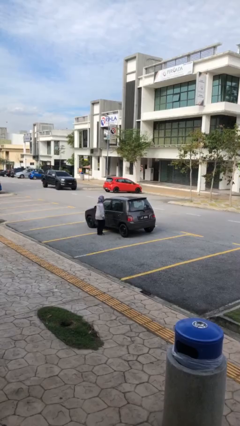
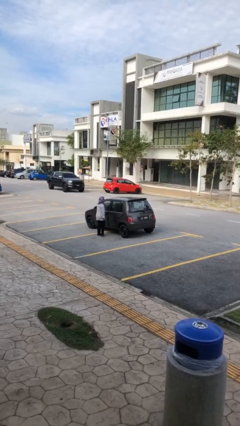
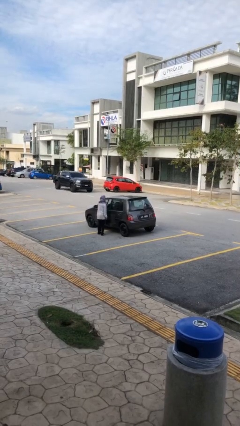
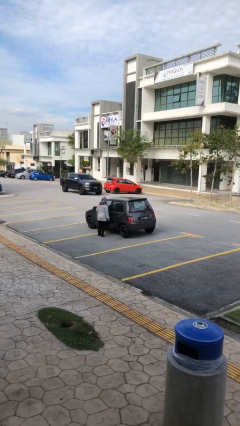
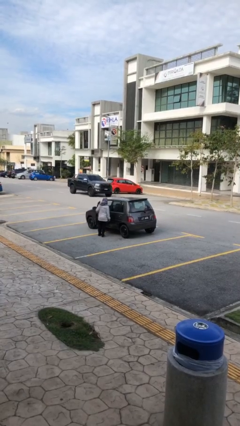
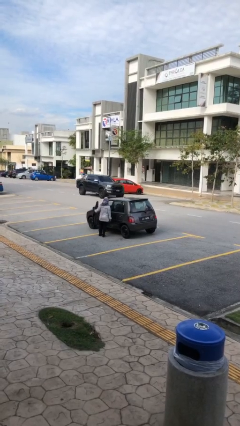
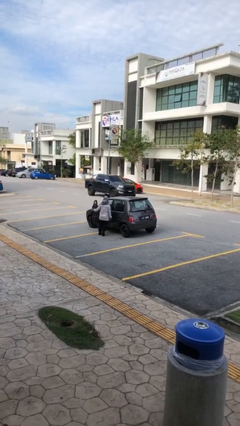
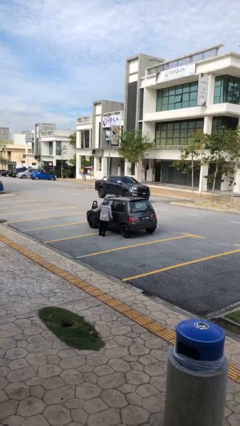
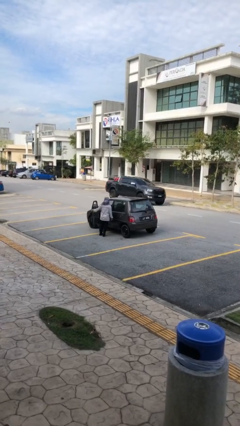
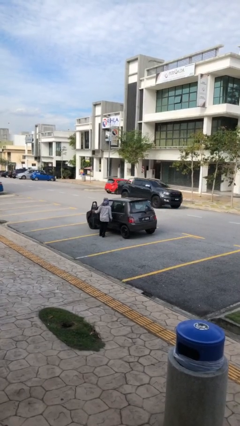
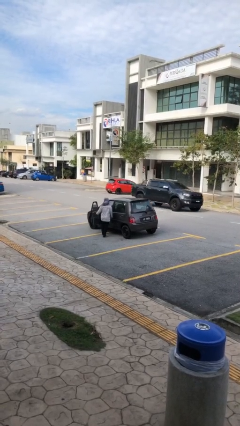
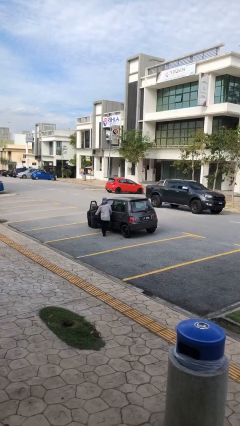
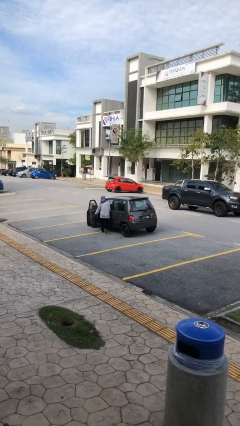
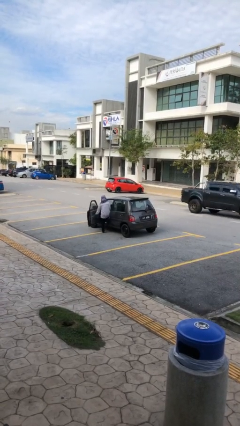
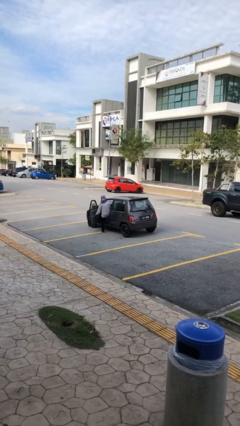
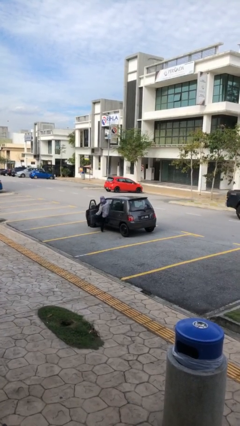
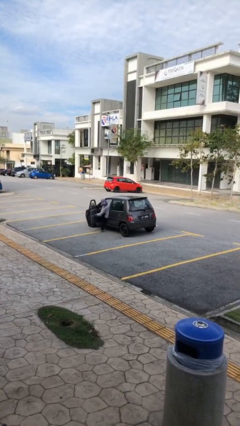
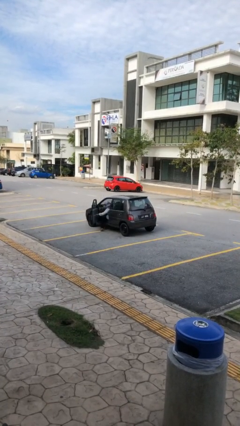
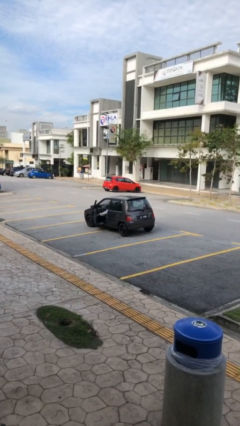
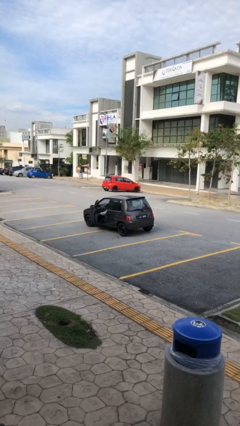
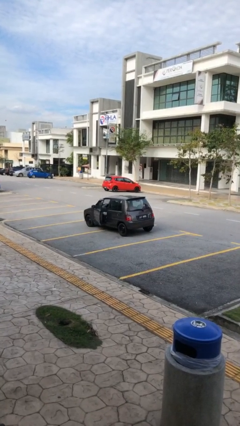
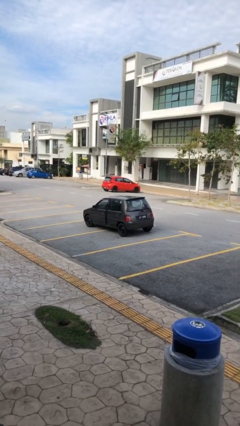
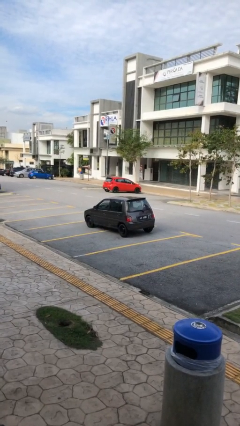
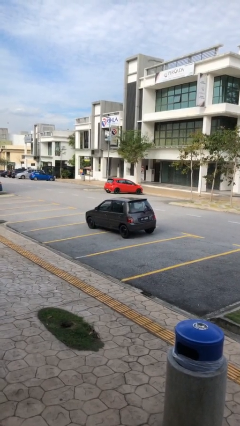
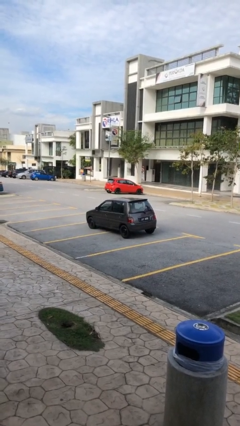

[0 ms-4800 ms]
car picks up person

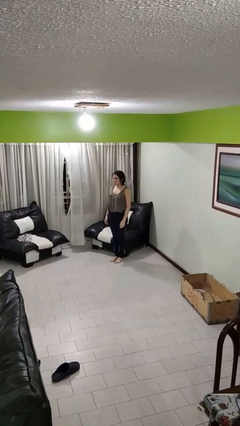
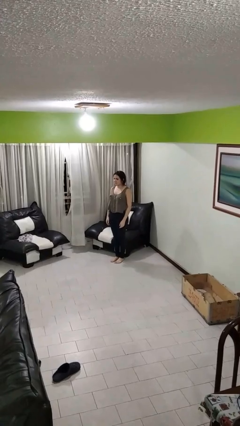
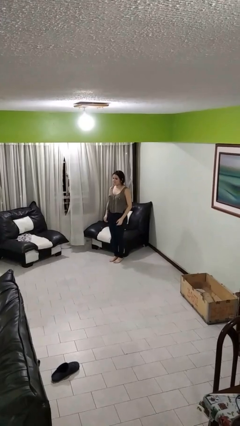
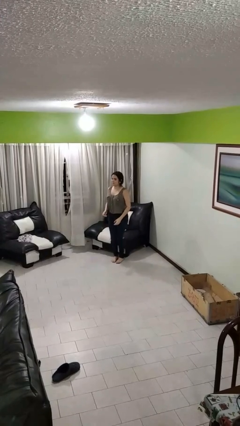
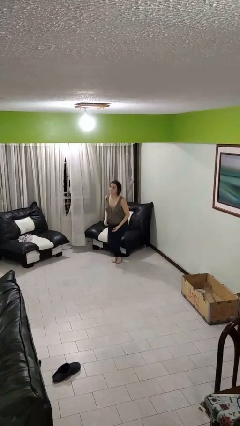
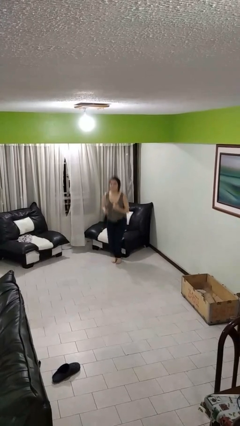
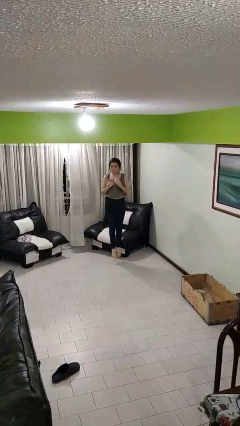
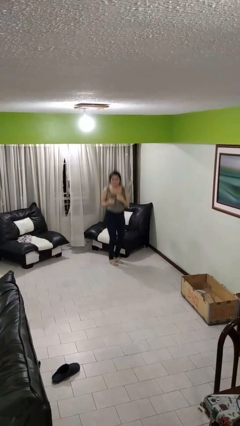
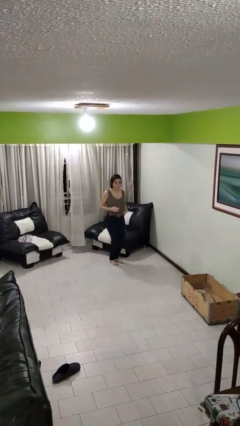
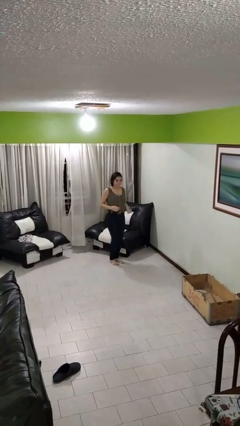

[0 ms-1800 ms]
person jumps

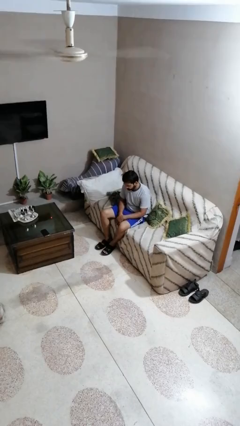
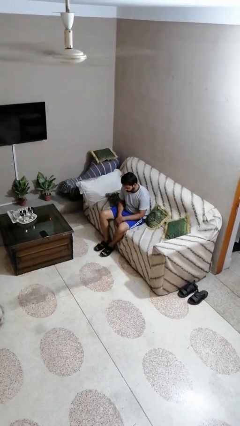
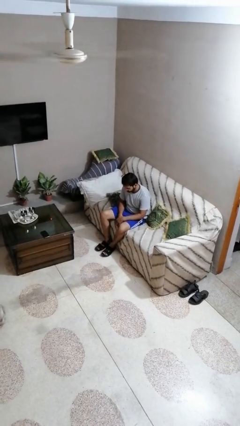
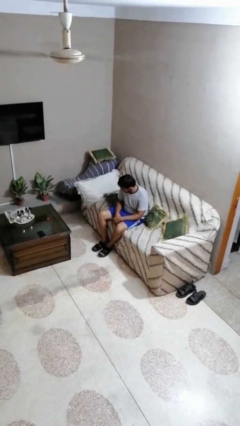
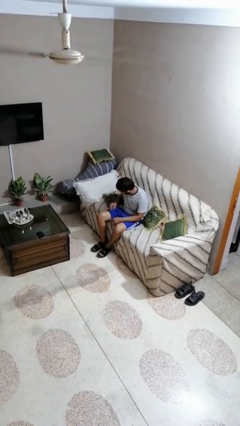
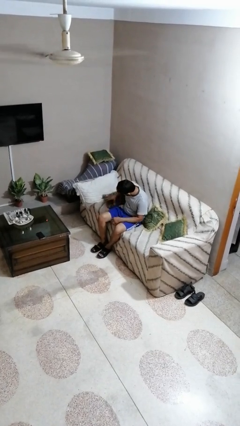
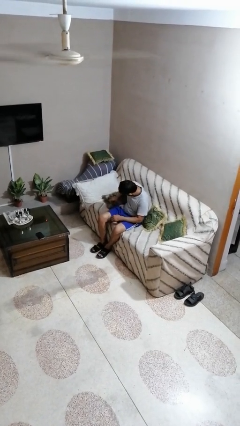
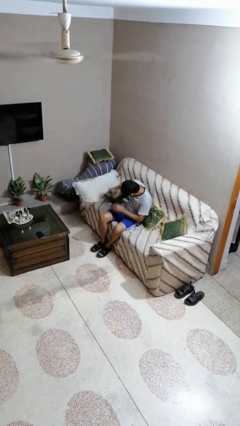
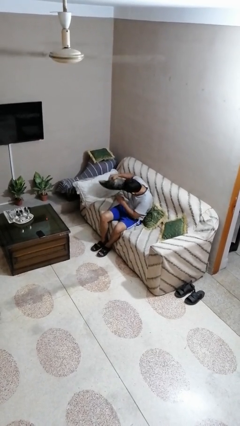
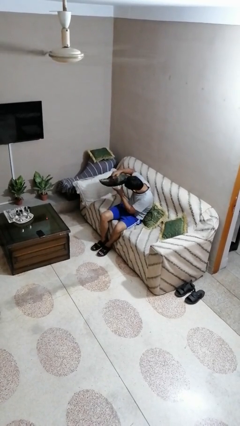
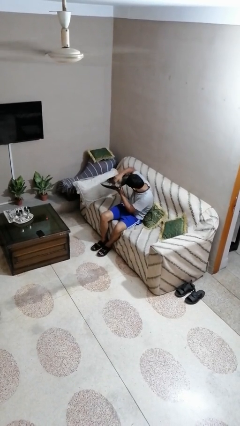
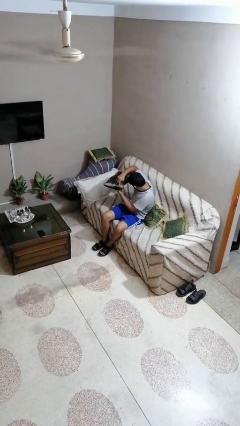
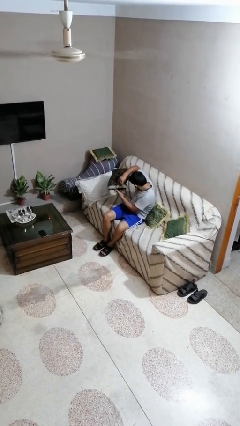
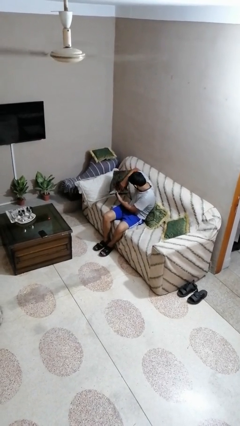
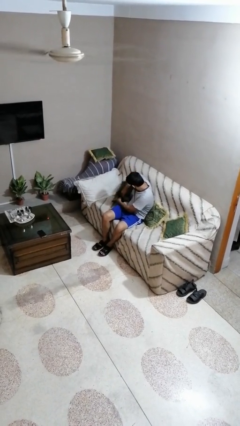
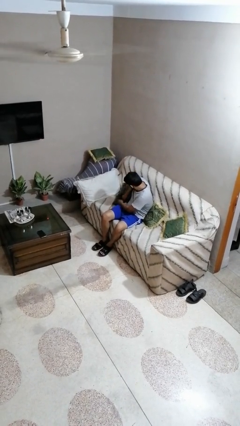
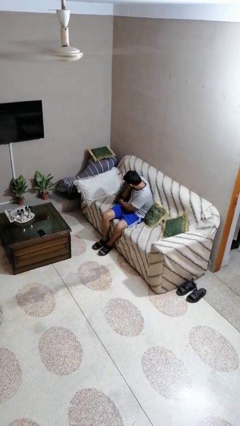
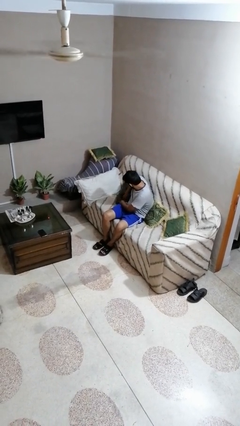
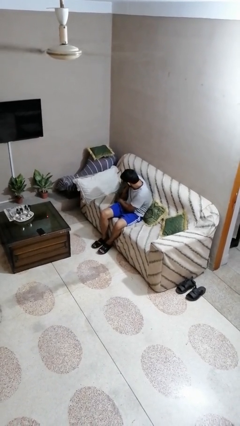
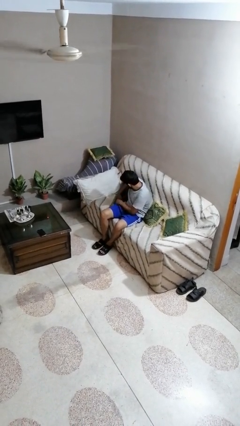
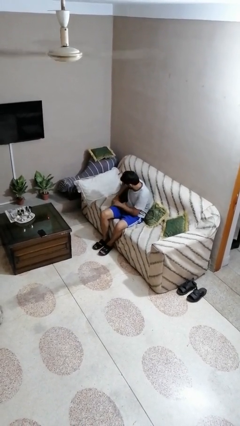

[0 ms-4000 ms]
person searches in couch

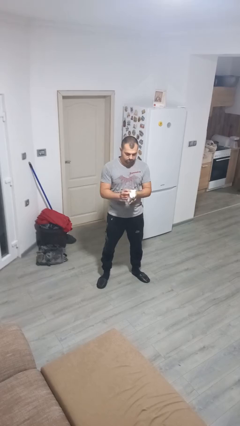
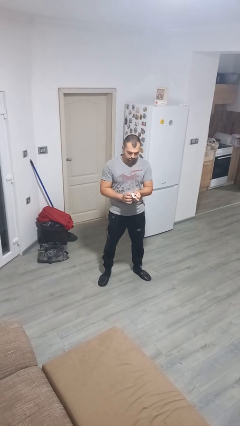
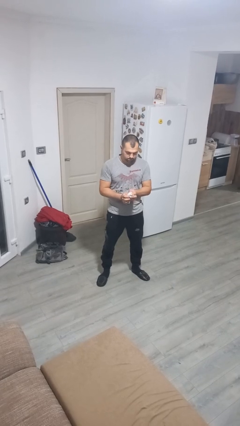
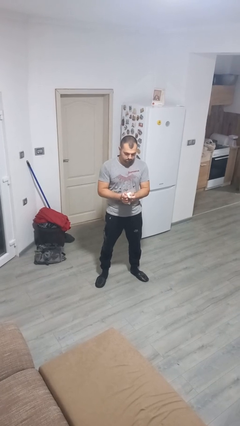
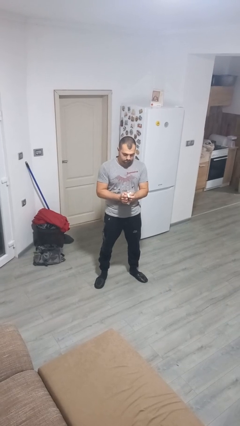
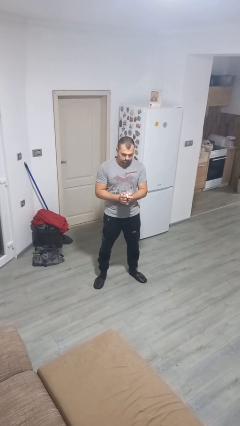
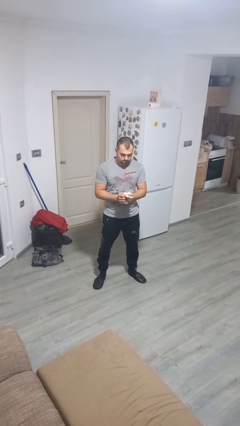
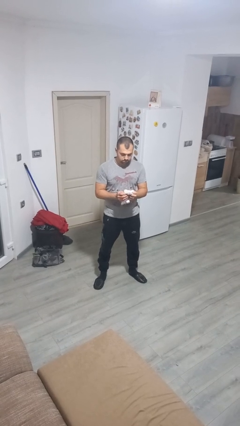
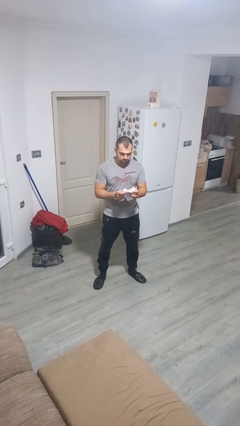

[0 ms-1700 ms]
person crumples paper

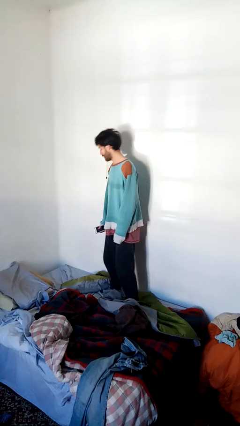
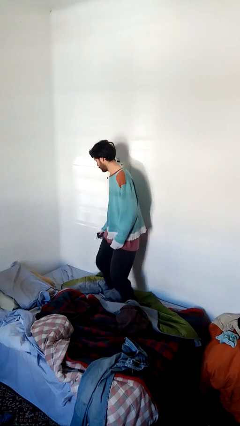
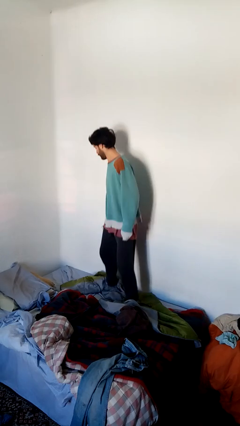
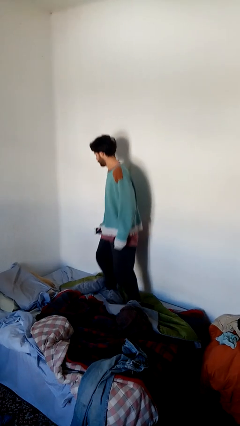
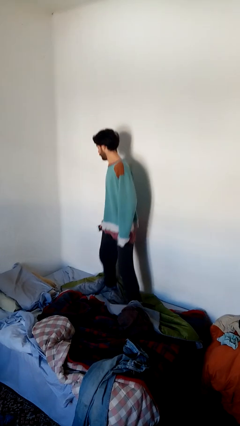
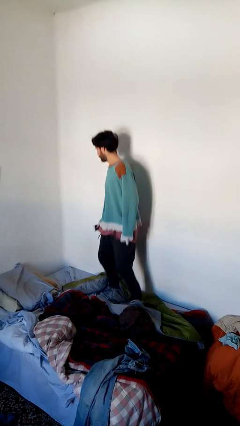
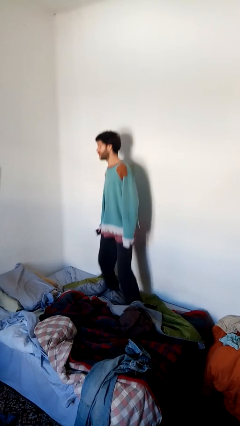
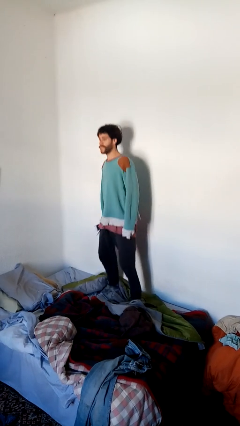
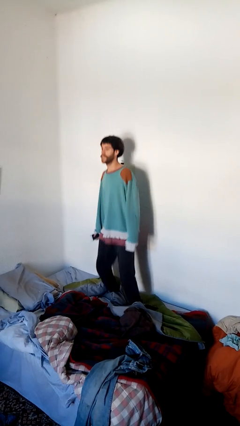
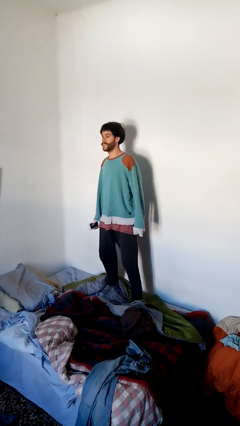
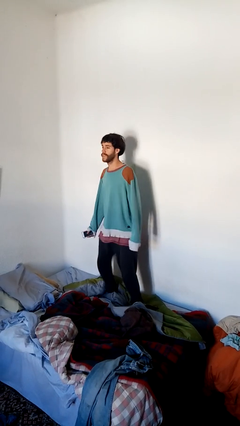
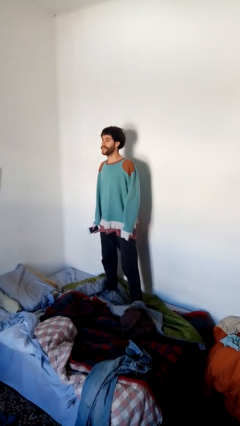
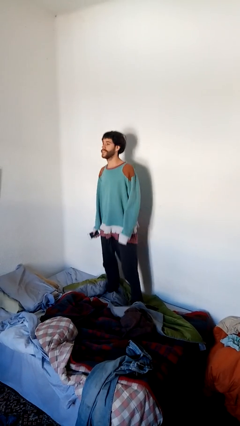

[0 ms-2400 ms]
person jumps on bed

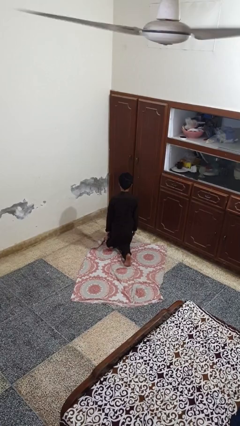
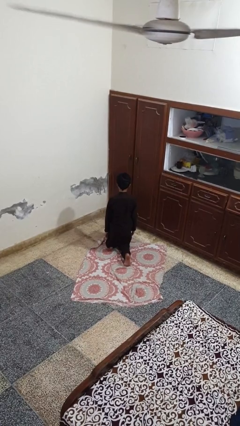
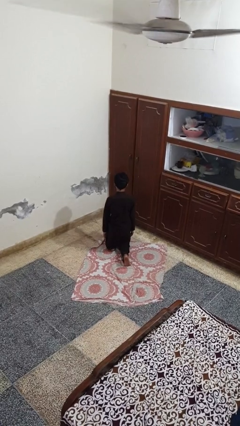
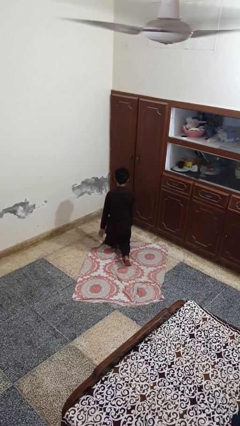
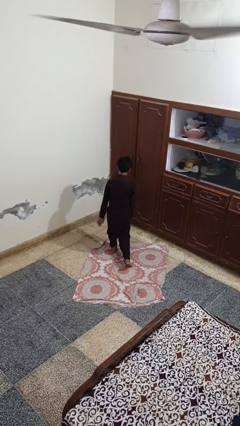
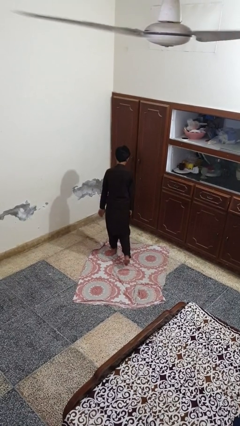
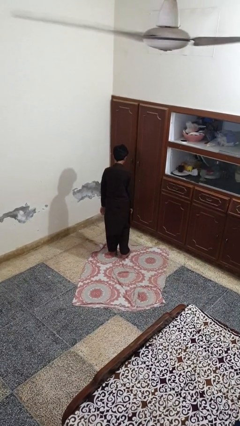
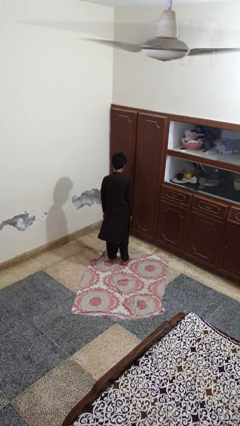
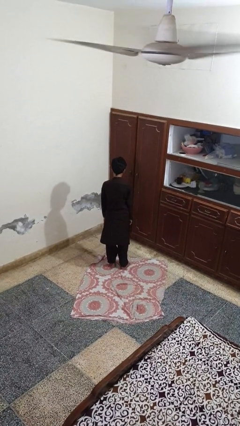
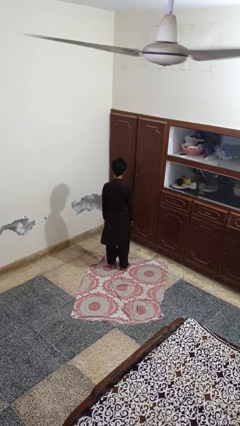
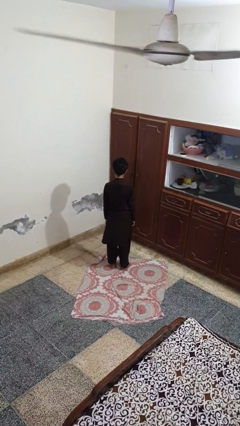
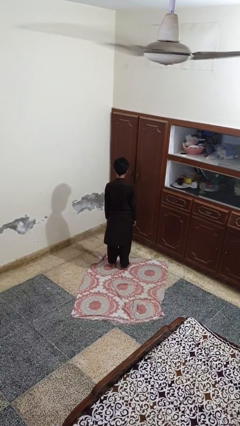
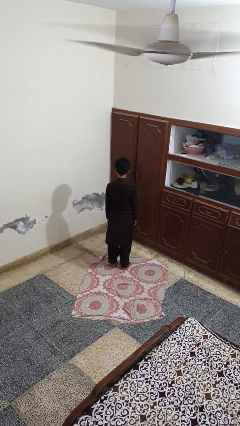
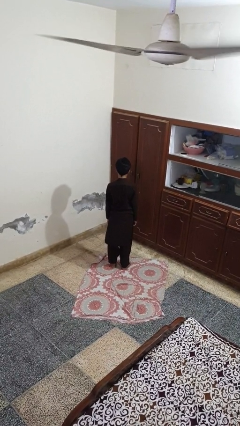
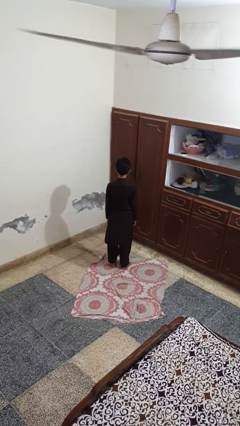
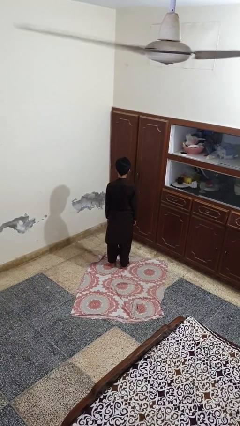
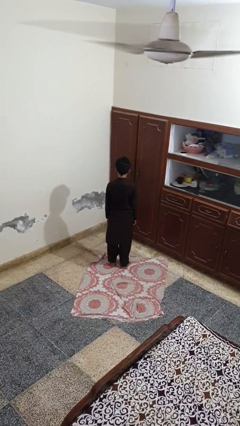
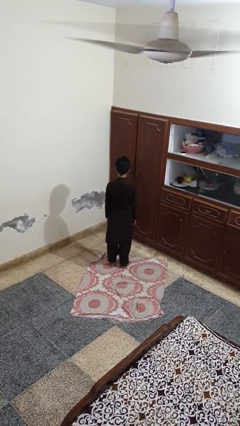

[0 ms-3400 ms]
person stands up from floor
